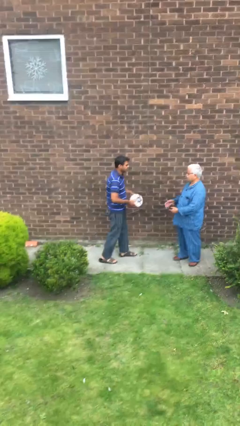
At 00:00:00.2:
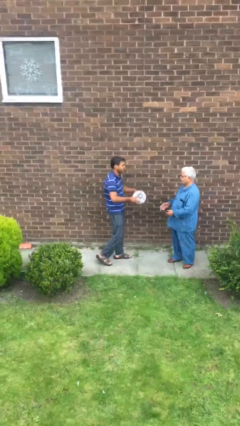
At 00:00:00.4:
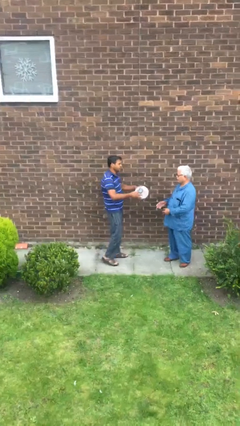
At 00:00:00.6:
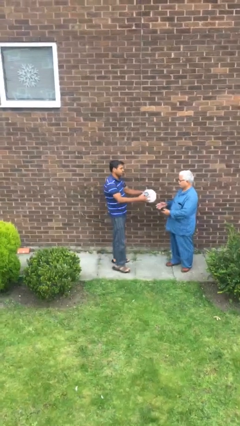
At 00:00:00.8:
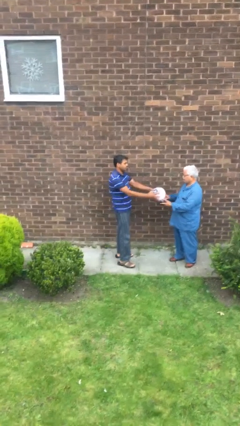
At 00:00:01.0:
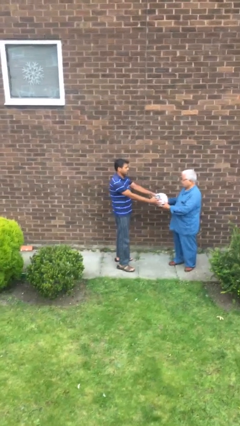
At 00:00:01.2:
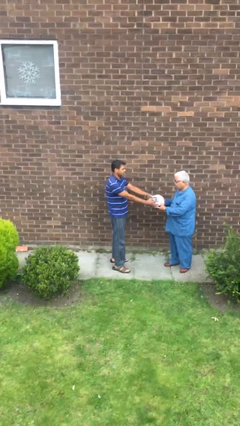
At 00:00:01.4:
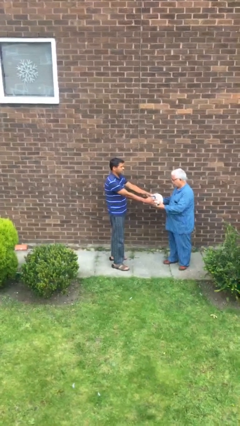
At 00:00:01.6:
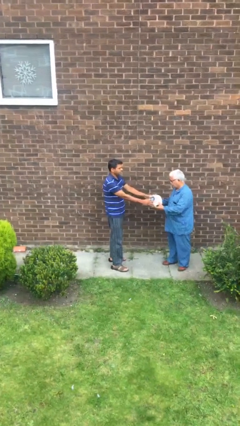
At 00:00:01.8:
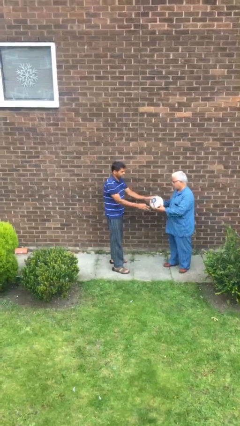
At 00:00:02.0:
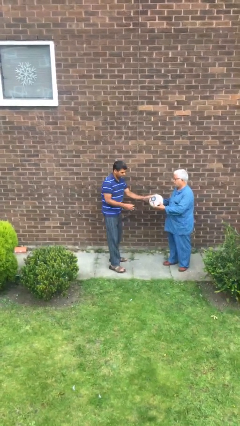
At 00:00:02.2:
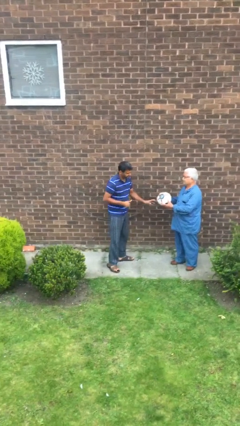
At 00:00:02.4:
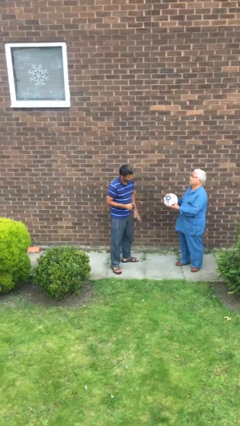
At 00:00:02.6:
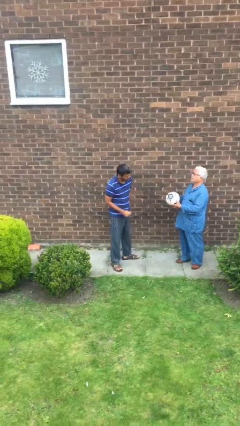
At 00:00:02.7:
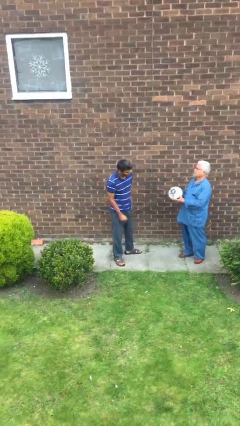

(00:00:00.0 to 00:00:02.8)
person transfers object to person

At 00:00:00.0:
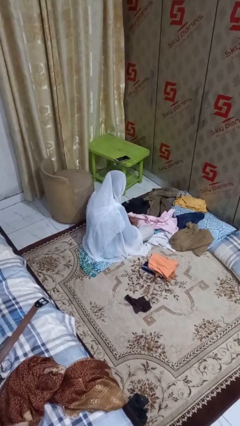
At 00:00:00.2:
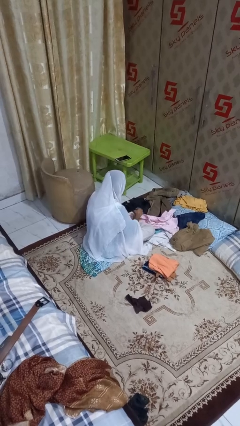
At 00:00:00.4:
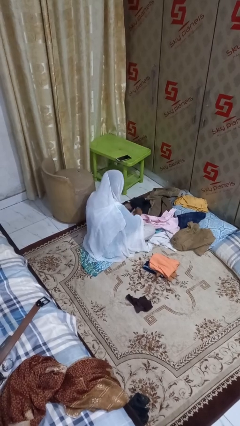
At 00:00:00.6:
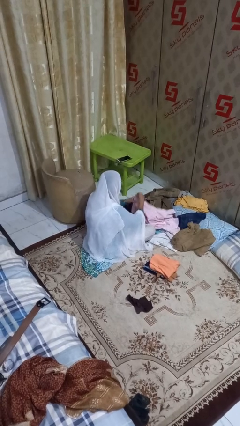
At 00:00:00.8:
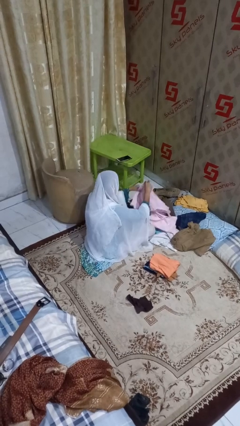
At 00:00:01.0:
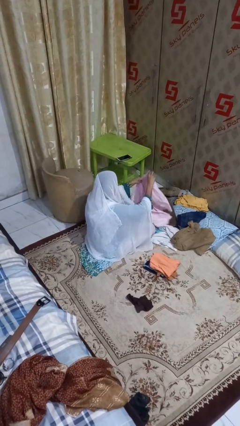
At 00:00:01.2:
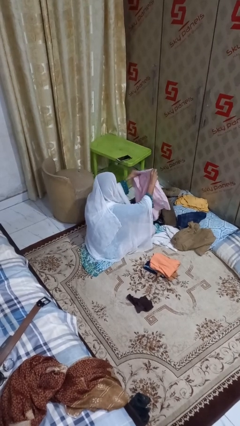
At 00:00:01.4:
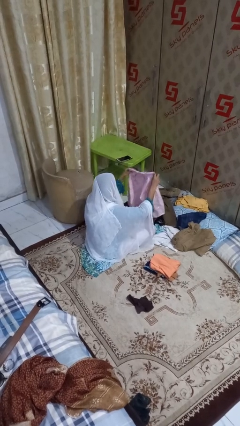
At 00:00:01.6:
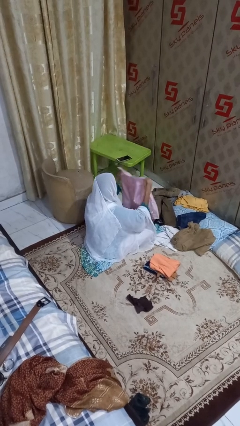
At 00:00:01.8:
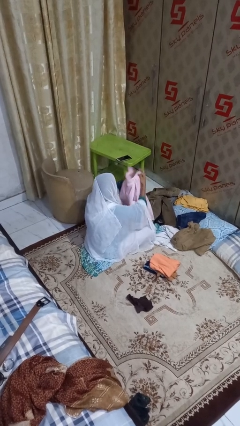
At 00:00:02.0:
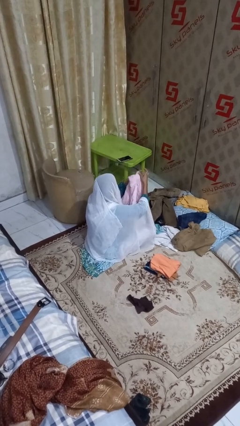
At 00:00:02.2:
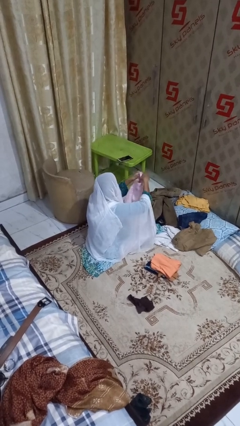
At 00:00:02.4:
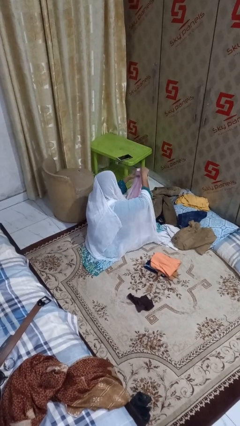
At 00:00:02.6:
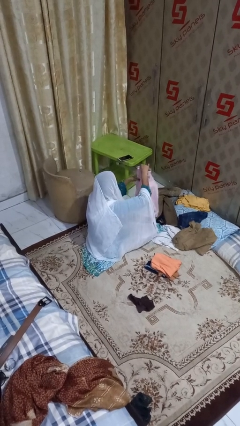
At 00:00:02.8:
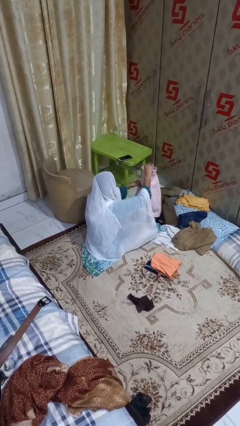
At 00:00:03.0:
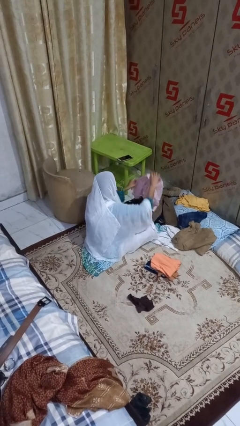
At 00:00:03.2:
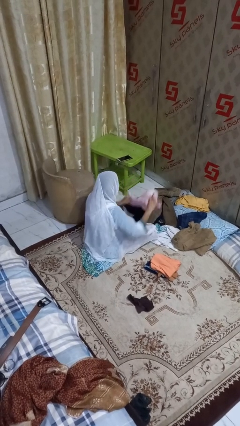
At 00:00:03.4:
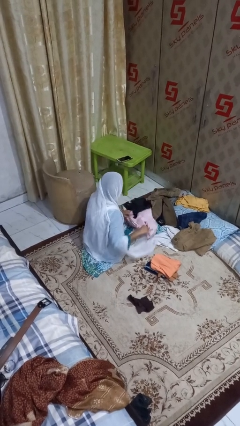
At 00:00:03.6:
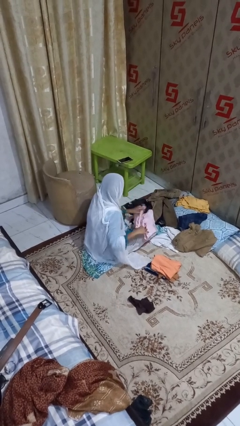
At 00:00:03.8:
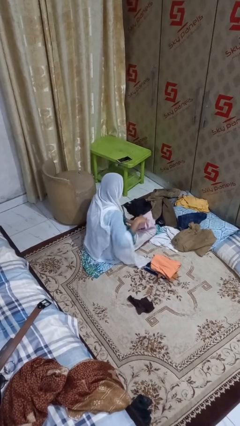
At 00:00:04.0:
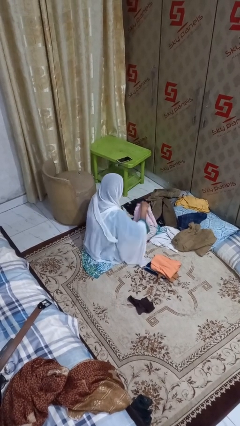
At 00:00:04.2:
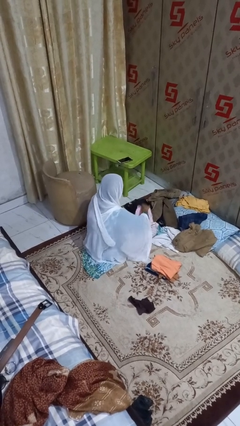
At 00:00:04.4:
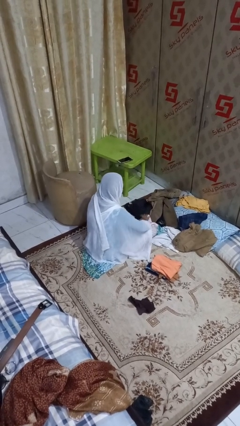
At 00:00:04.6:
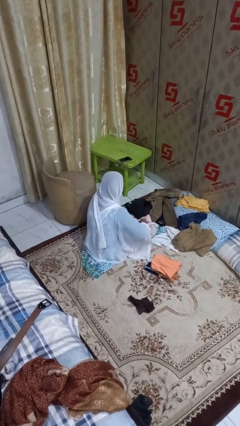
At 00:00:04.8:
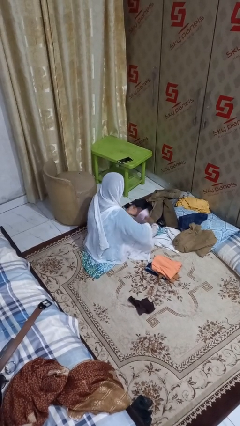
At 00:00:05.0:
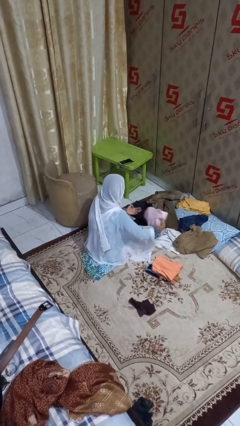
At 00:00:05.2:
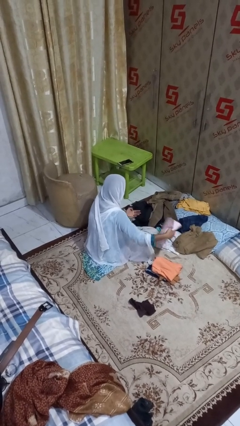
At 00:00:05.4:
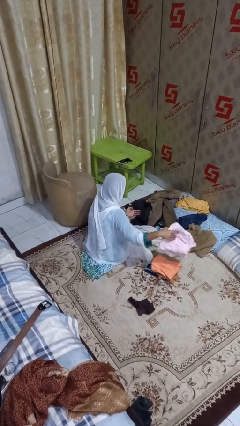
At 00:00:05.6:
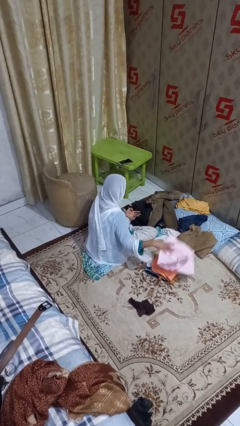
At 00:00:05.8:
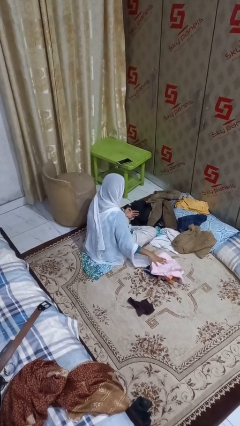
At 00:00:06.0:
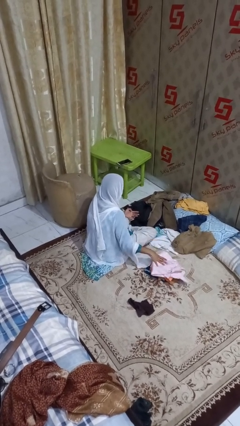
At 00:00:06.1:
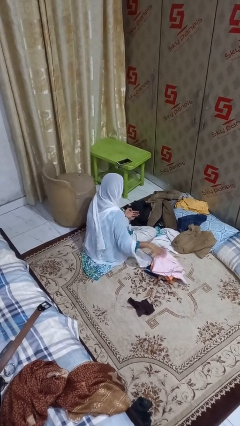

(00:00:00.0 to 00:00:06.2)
person folds shirt

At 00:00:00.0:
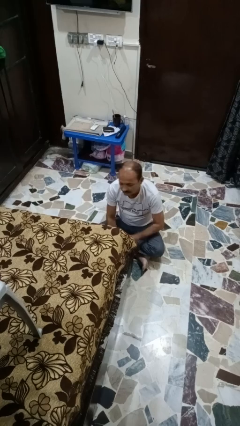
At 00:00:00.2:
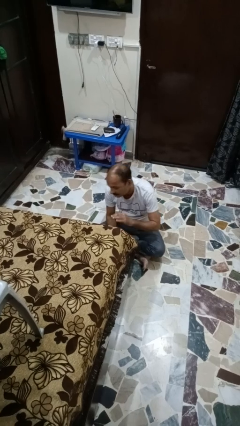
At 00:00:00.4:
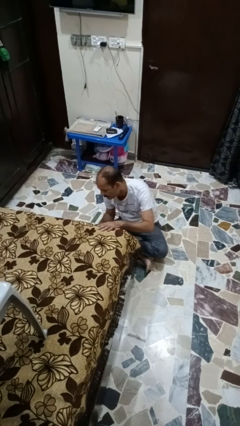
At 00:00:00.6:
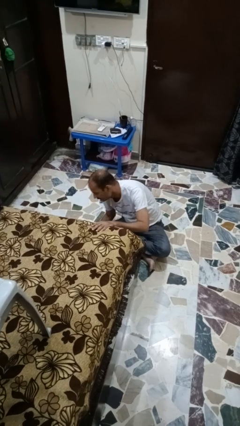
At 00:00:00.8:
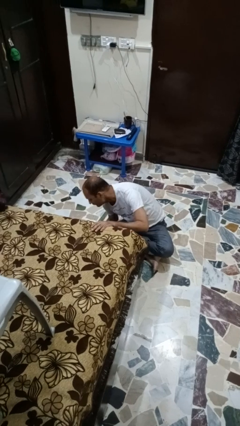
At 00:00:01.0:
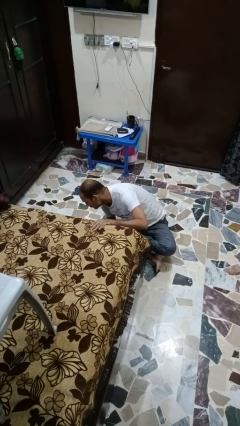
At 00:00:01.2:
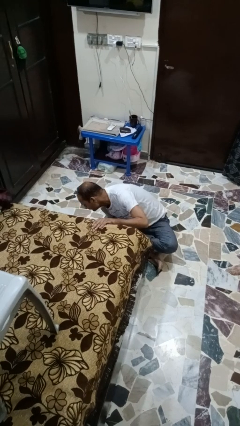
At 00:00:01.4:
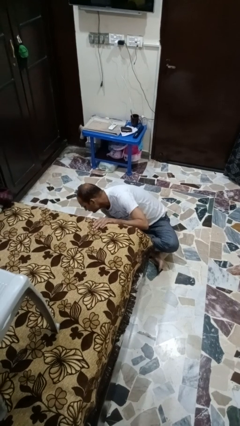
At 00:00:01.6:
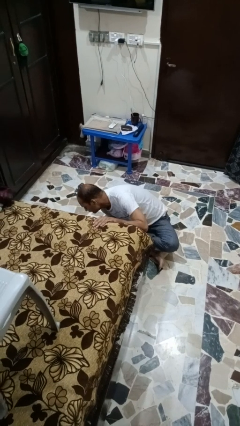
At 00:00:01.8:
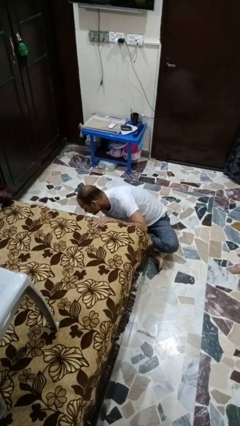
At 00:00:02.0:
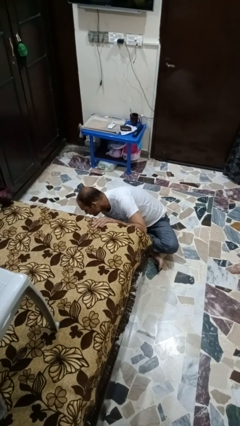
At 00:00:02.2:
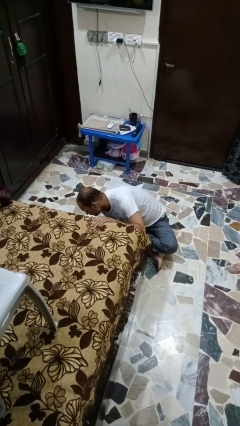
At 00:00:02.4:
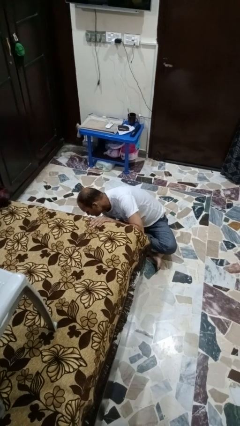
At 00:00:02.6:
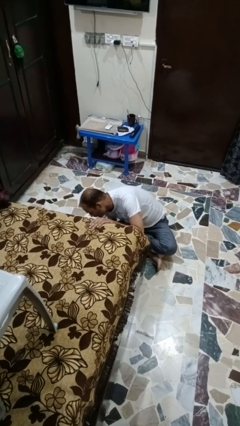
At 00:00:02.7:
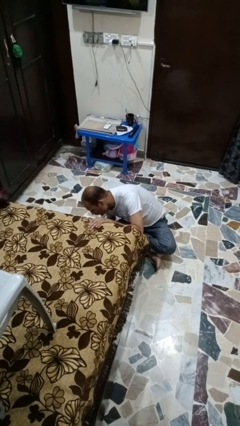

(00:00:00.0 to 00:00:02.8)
person searches under bed

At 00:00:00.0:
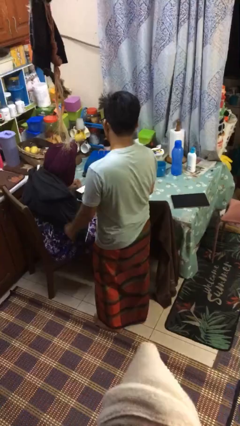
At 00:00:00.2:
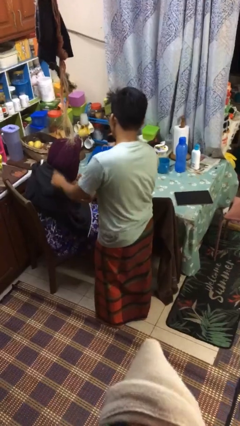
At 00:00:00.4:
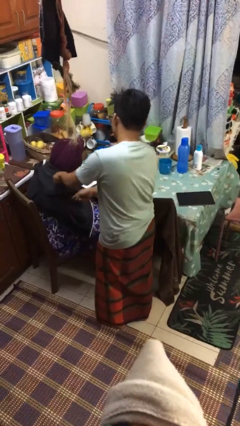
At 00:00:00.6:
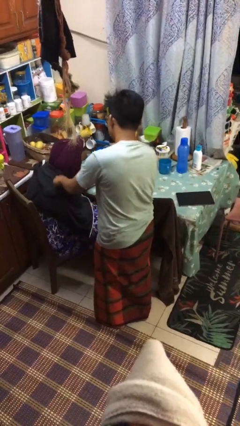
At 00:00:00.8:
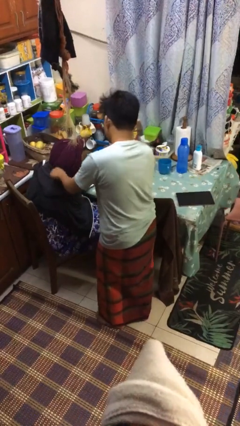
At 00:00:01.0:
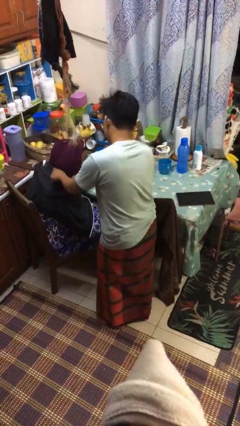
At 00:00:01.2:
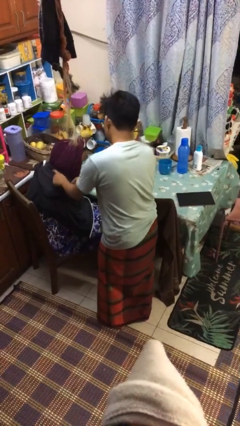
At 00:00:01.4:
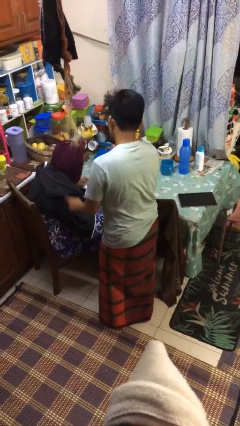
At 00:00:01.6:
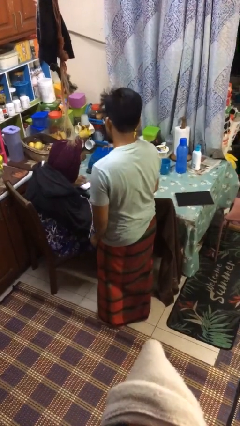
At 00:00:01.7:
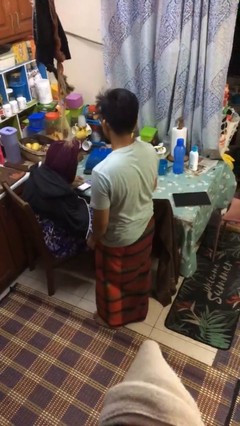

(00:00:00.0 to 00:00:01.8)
person tickles person

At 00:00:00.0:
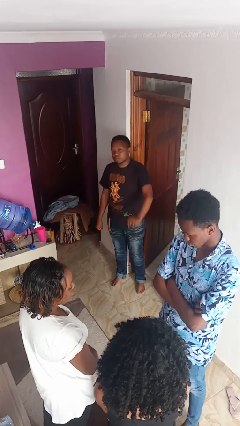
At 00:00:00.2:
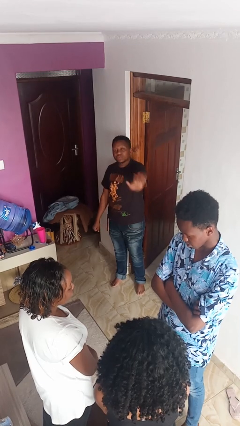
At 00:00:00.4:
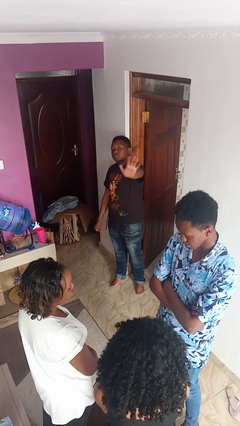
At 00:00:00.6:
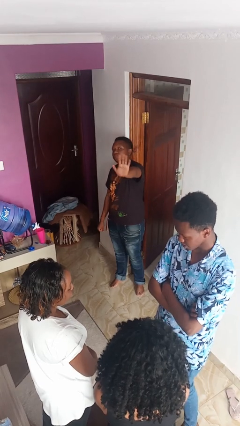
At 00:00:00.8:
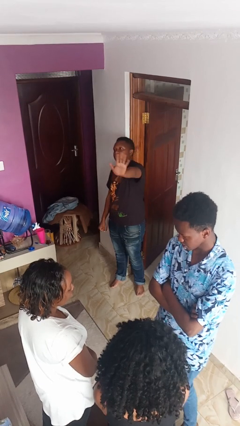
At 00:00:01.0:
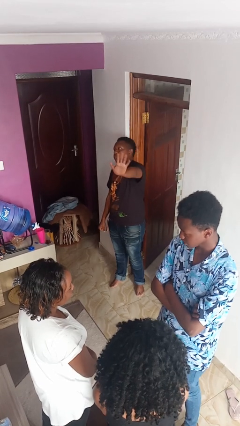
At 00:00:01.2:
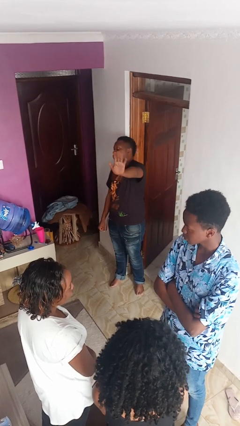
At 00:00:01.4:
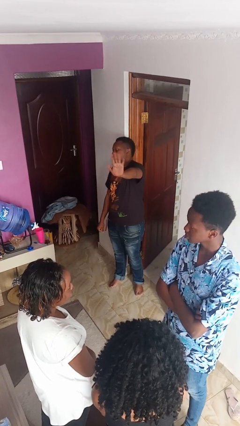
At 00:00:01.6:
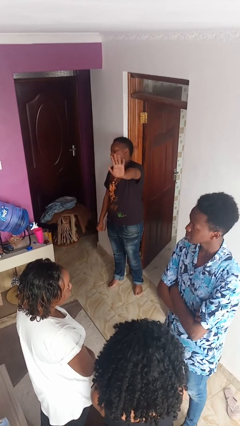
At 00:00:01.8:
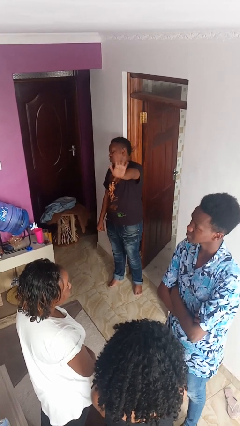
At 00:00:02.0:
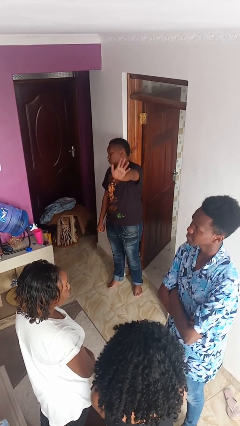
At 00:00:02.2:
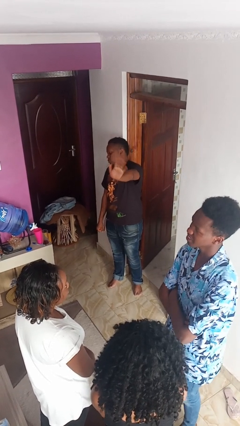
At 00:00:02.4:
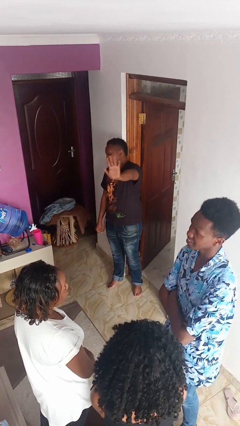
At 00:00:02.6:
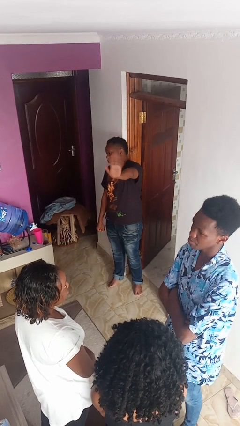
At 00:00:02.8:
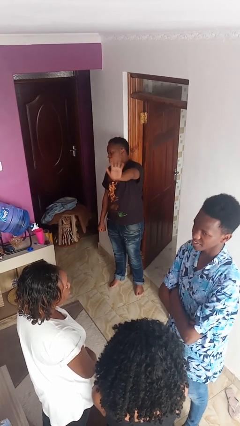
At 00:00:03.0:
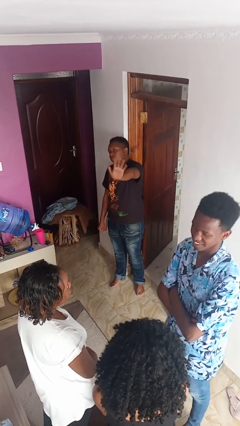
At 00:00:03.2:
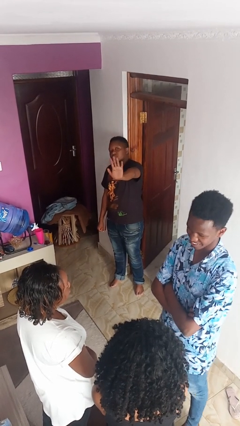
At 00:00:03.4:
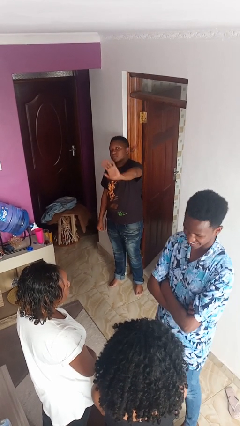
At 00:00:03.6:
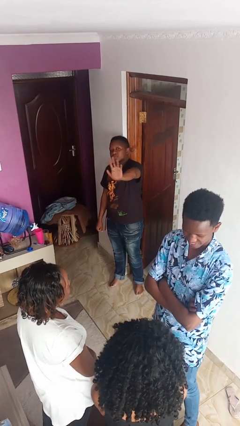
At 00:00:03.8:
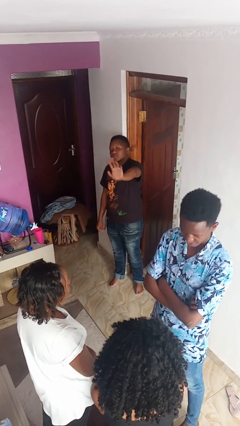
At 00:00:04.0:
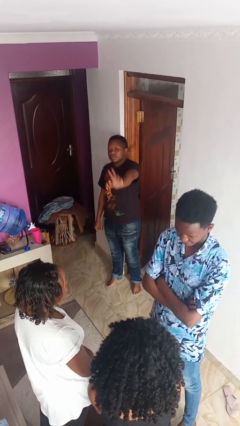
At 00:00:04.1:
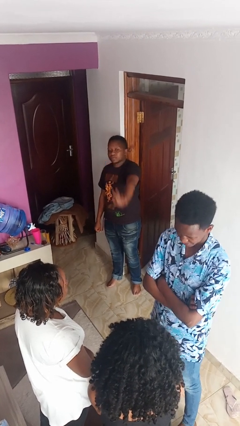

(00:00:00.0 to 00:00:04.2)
person waves at person
